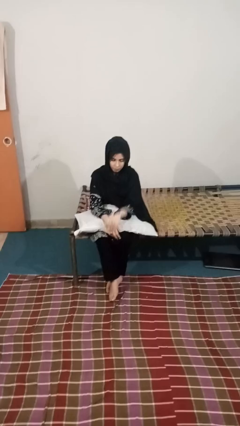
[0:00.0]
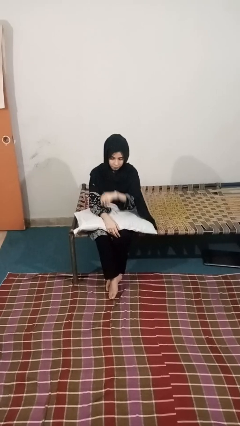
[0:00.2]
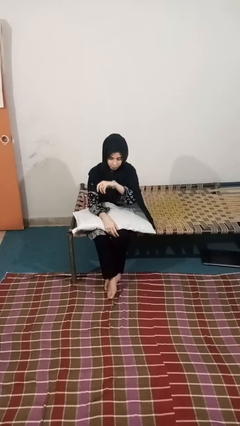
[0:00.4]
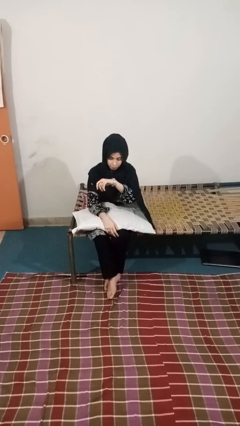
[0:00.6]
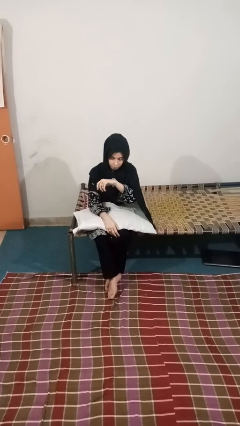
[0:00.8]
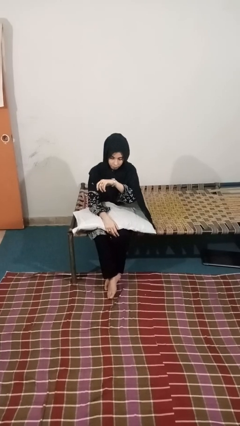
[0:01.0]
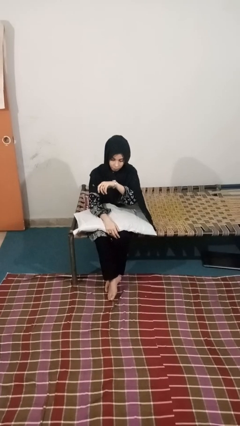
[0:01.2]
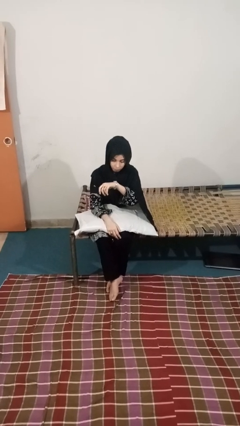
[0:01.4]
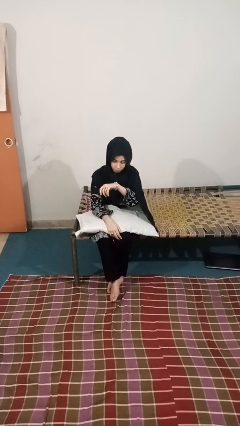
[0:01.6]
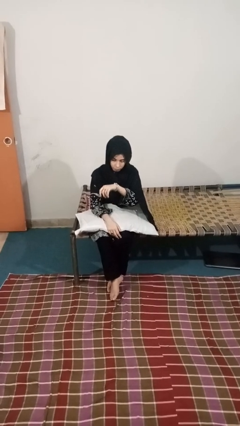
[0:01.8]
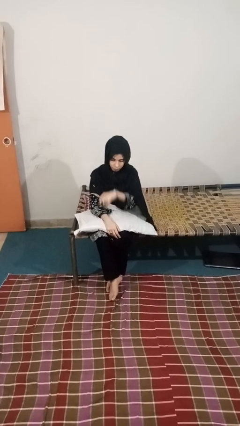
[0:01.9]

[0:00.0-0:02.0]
person looks at wristwatch

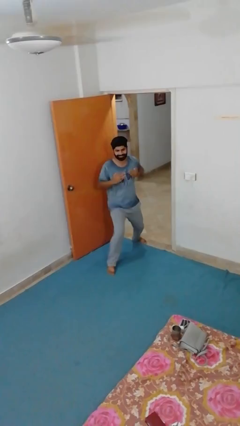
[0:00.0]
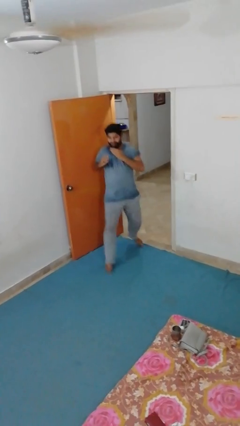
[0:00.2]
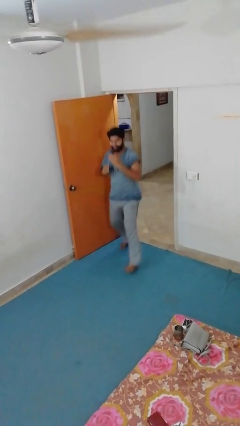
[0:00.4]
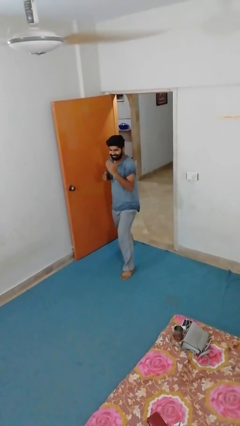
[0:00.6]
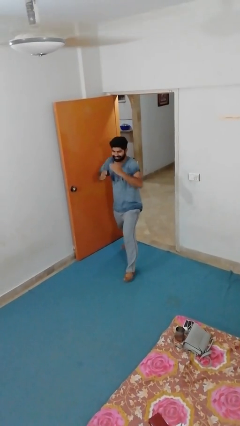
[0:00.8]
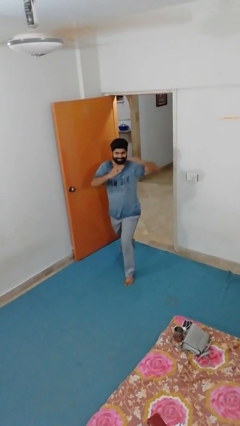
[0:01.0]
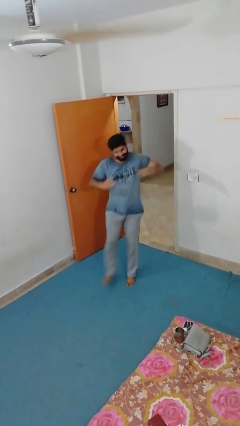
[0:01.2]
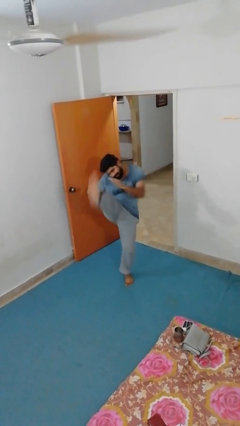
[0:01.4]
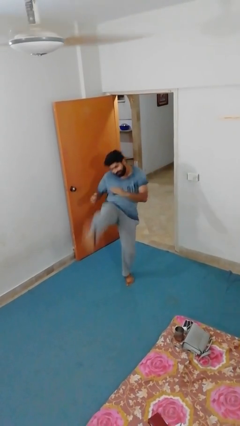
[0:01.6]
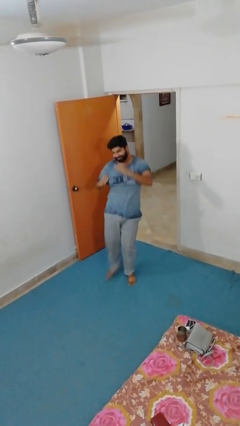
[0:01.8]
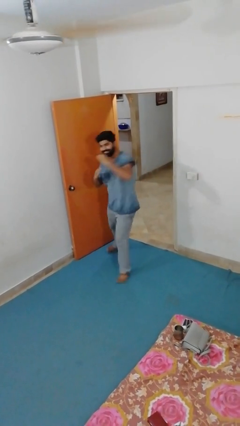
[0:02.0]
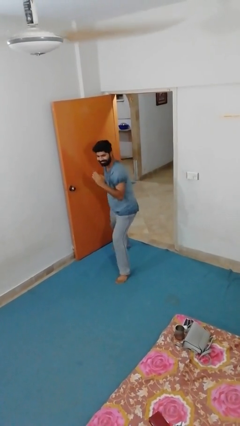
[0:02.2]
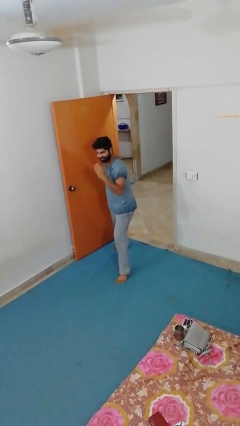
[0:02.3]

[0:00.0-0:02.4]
person karate kicks

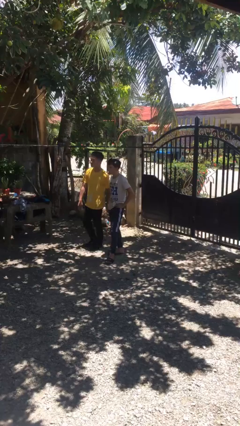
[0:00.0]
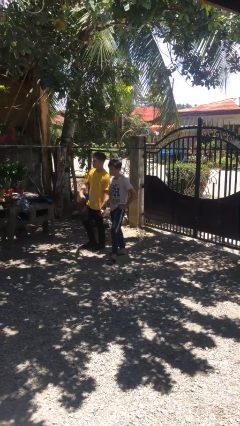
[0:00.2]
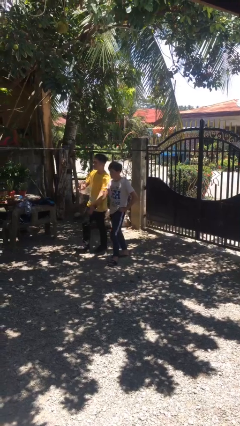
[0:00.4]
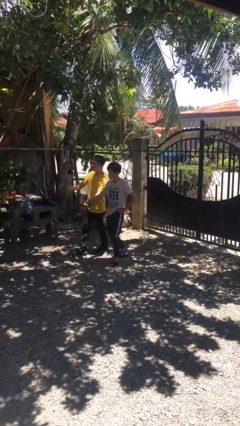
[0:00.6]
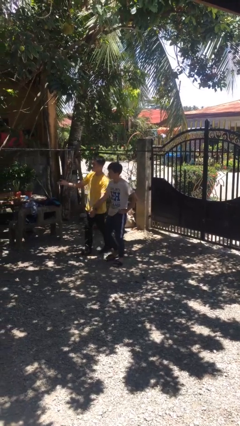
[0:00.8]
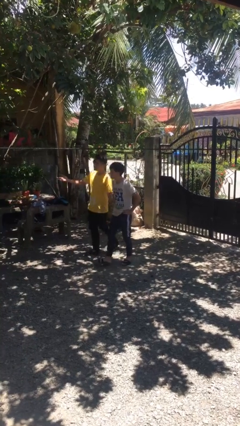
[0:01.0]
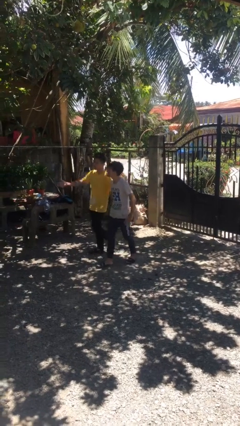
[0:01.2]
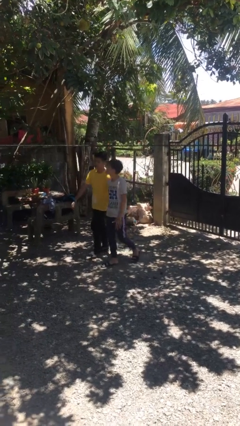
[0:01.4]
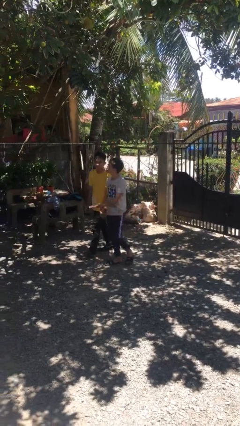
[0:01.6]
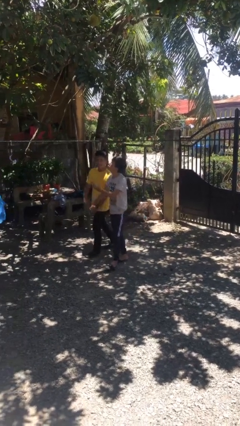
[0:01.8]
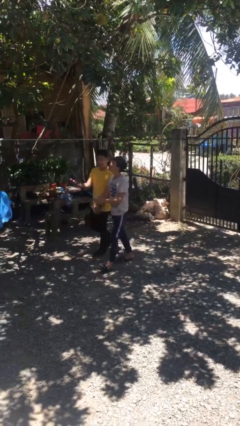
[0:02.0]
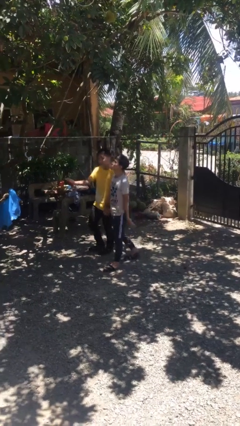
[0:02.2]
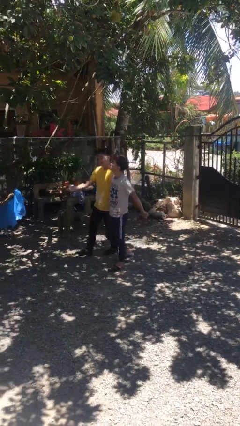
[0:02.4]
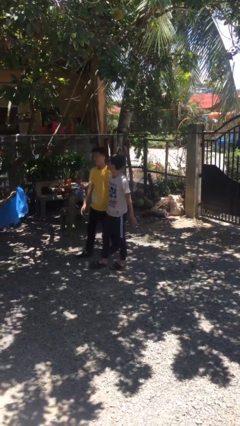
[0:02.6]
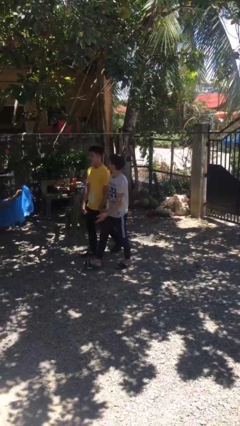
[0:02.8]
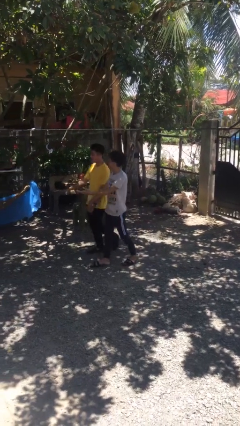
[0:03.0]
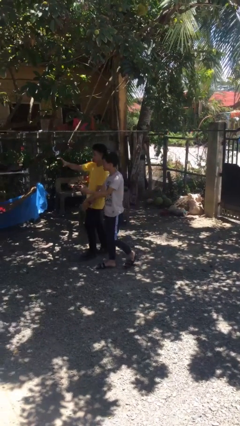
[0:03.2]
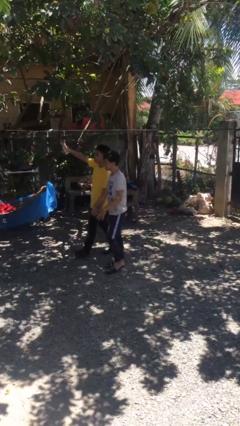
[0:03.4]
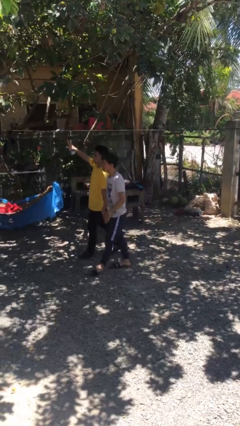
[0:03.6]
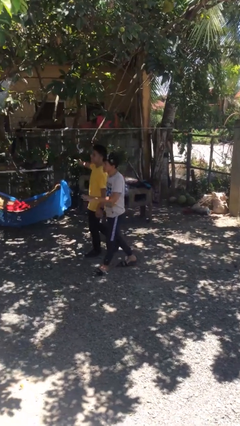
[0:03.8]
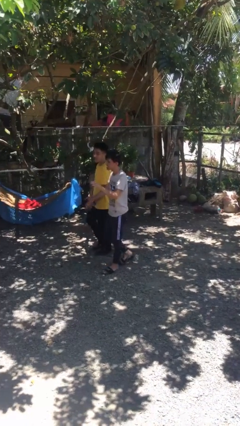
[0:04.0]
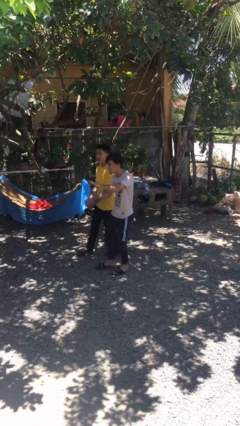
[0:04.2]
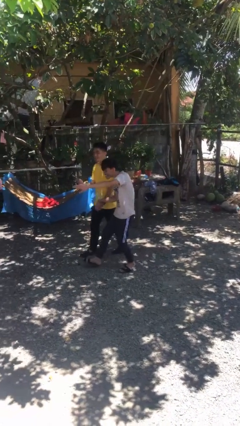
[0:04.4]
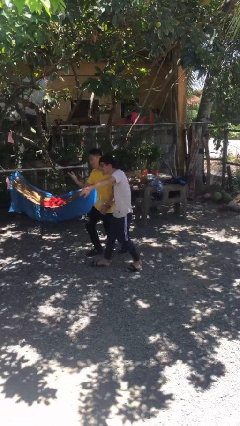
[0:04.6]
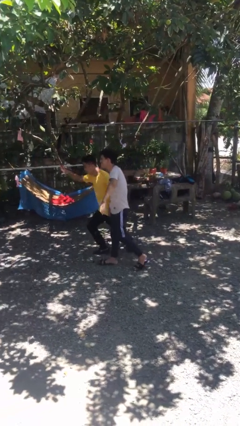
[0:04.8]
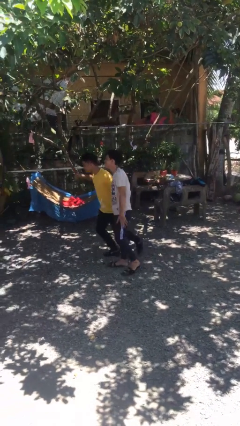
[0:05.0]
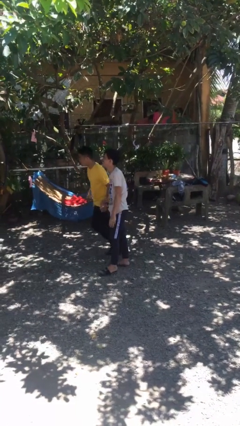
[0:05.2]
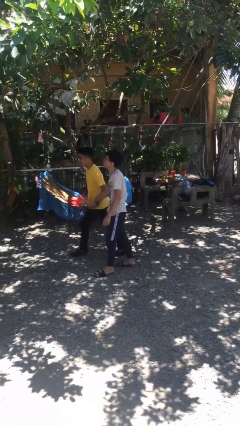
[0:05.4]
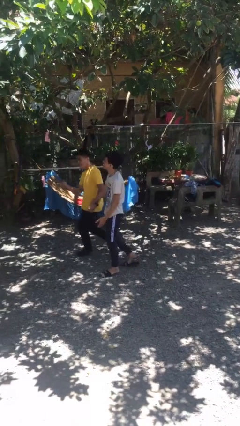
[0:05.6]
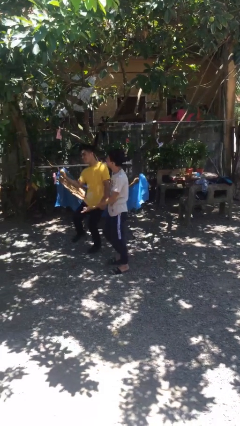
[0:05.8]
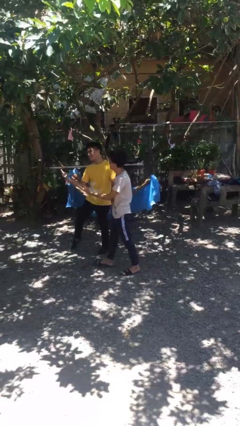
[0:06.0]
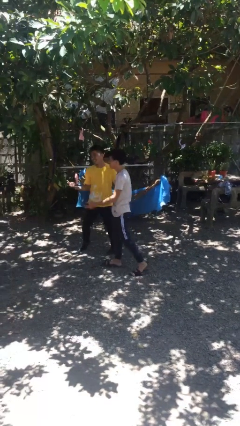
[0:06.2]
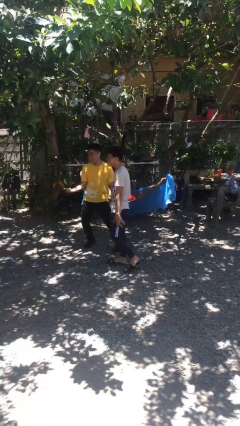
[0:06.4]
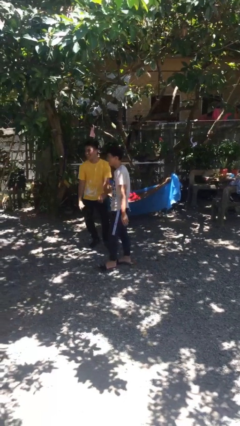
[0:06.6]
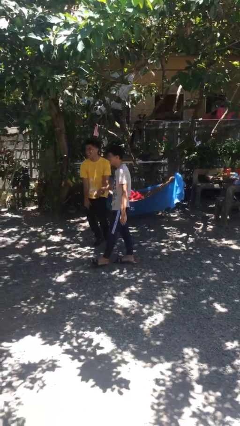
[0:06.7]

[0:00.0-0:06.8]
person holds hand

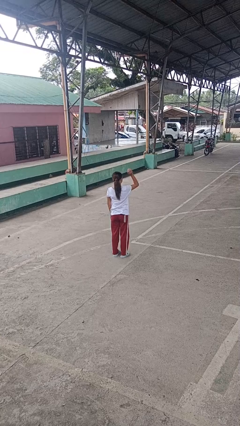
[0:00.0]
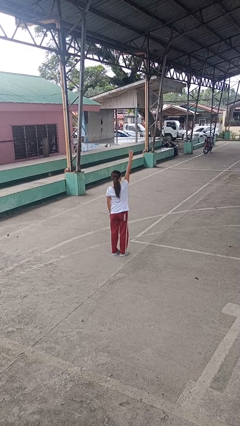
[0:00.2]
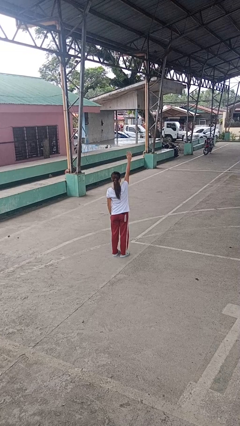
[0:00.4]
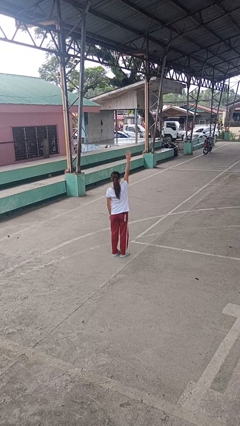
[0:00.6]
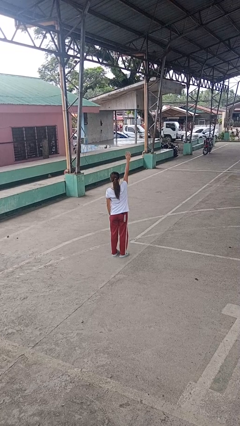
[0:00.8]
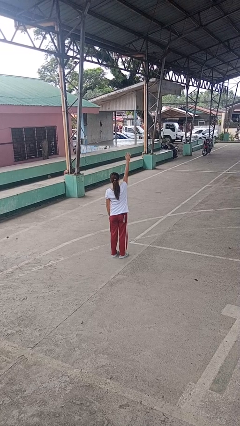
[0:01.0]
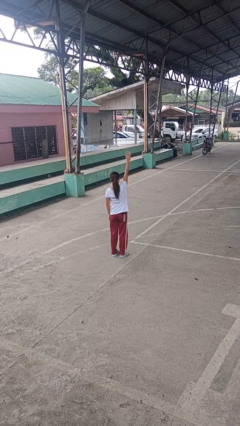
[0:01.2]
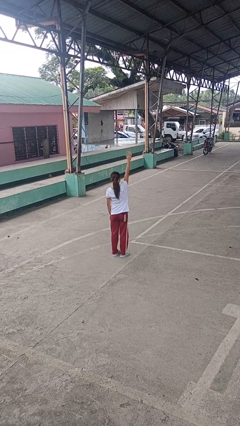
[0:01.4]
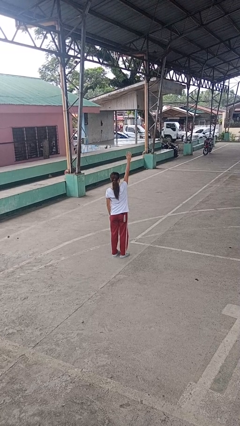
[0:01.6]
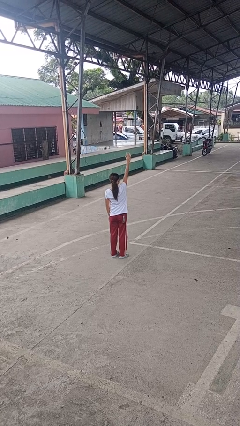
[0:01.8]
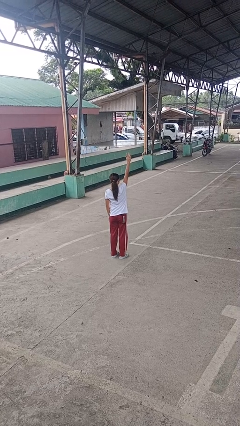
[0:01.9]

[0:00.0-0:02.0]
person gestures raise hand

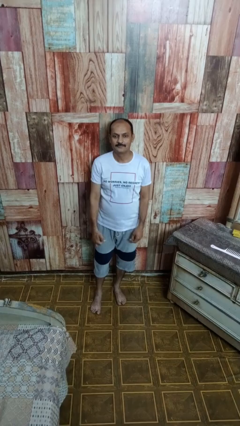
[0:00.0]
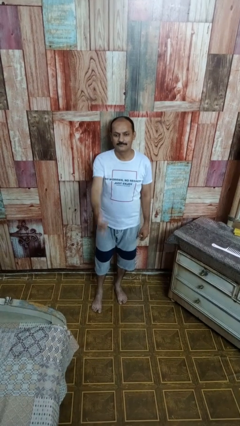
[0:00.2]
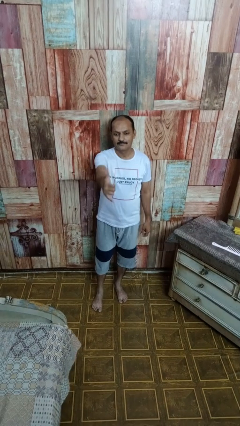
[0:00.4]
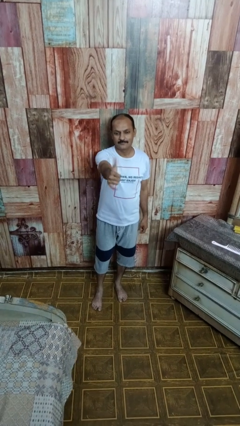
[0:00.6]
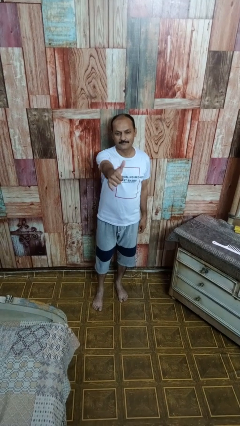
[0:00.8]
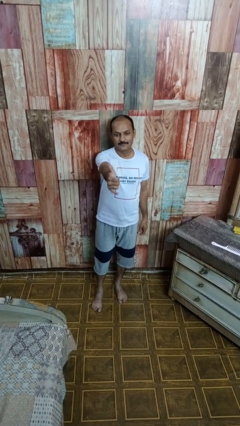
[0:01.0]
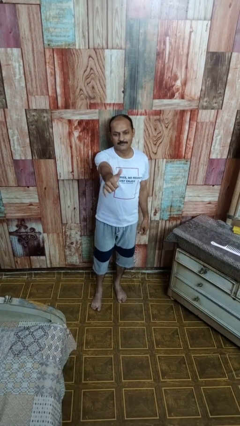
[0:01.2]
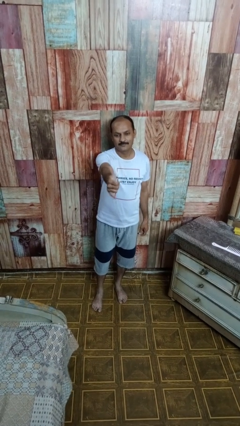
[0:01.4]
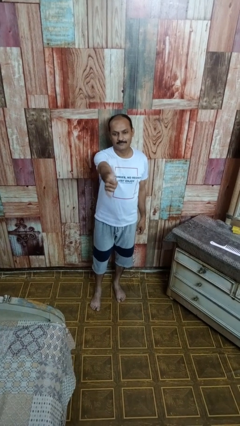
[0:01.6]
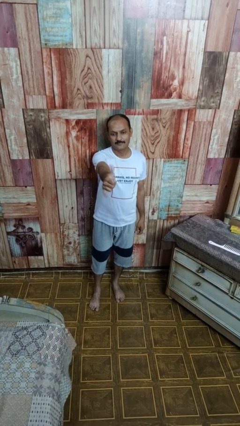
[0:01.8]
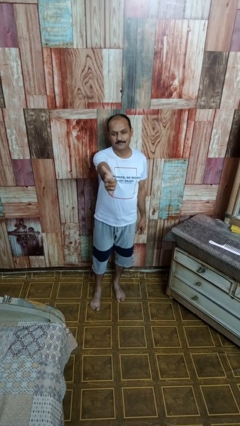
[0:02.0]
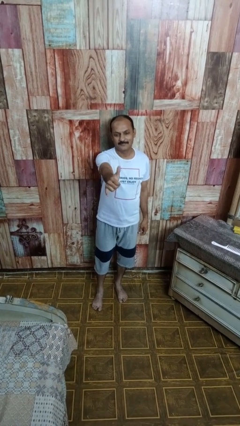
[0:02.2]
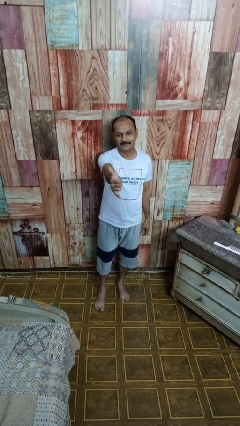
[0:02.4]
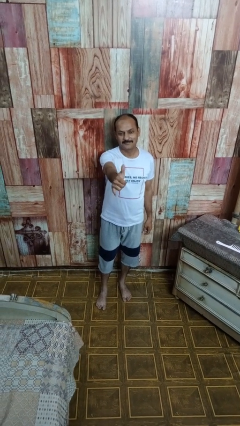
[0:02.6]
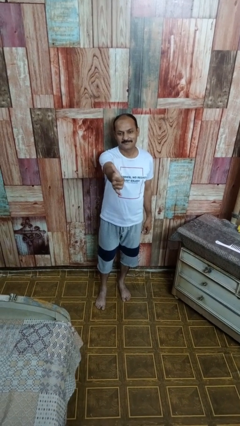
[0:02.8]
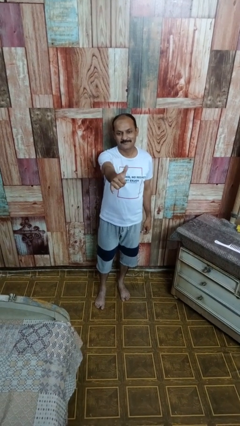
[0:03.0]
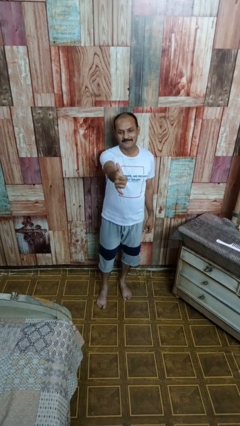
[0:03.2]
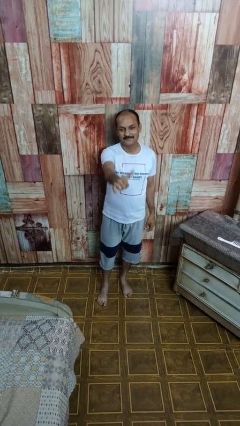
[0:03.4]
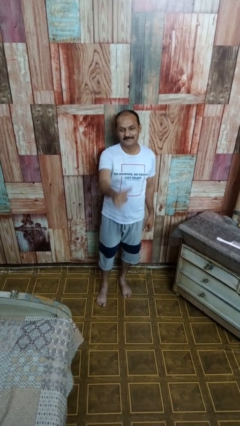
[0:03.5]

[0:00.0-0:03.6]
person gestures hang loose

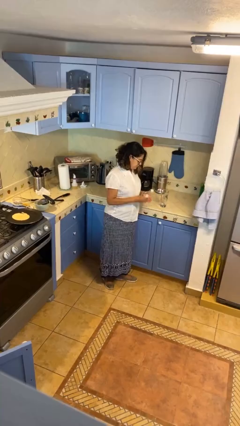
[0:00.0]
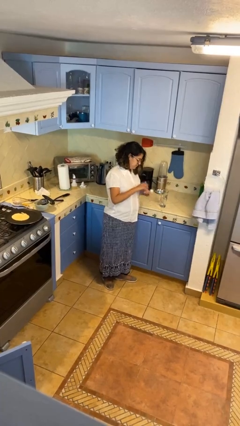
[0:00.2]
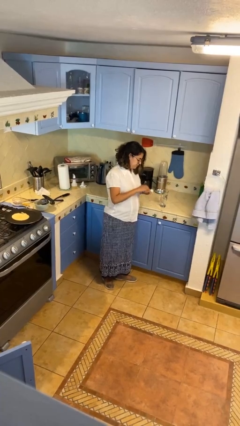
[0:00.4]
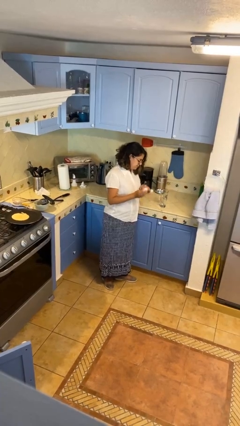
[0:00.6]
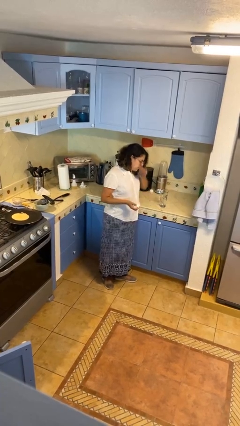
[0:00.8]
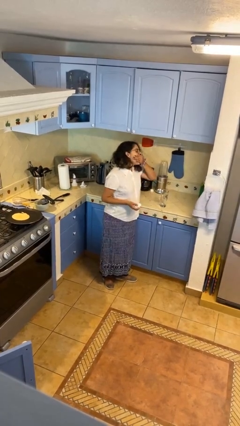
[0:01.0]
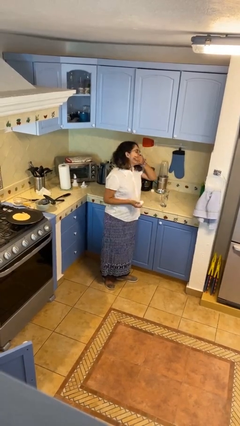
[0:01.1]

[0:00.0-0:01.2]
person takes medicine pills
